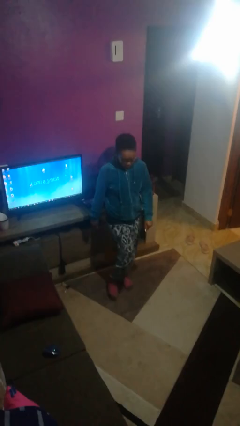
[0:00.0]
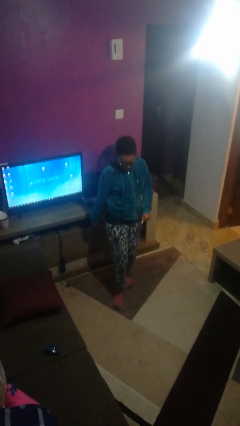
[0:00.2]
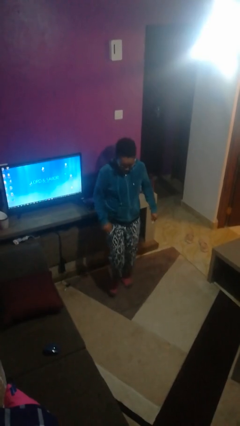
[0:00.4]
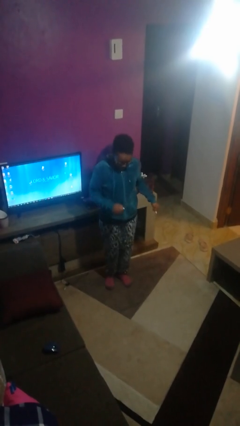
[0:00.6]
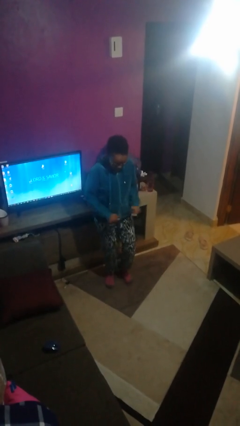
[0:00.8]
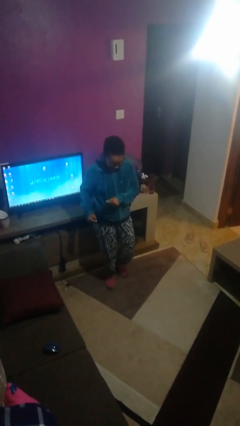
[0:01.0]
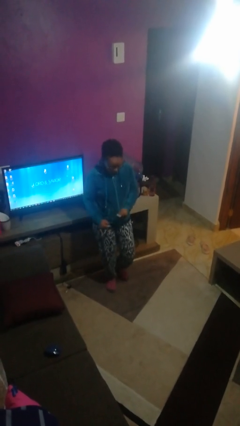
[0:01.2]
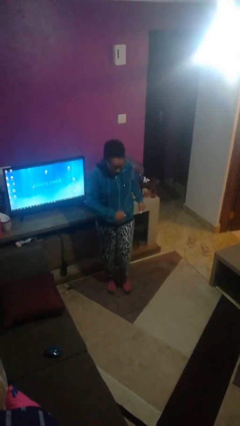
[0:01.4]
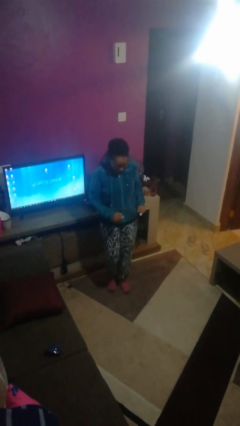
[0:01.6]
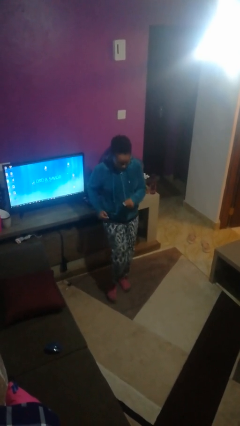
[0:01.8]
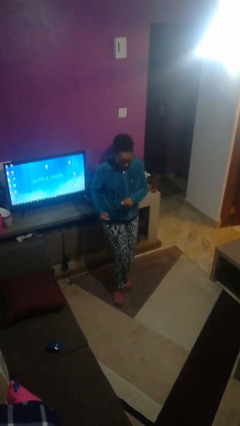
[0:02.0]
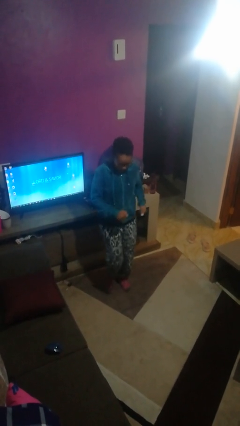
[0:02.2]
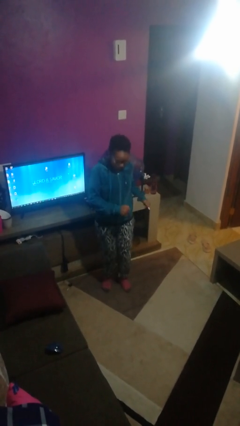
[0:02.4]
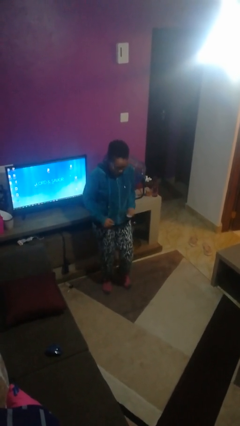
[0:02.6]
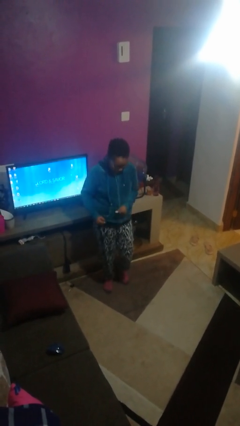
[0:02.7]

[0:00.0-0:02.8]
person dances in place

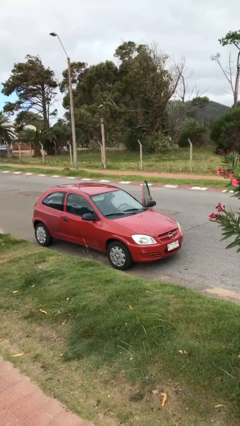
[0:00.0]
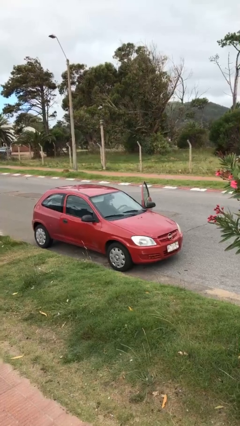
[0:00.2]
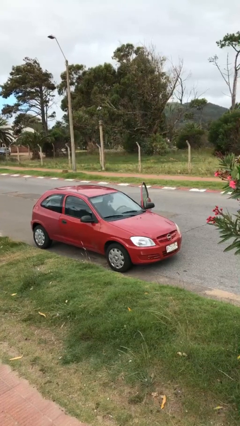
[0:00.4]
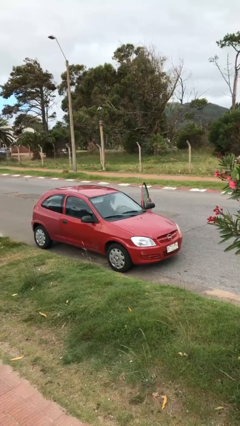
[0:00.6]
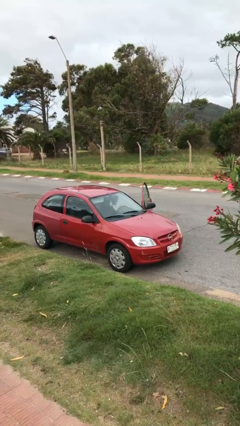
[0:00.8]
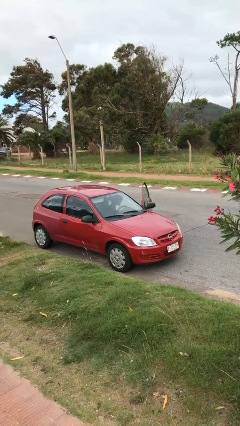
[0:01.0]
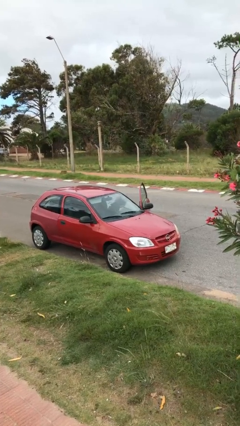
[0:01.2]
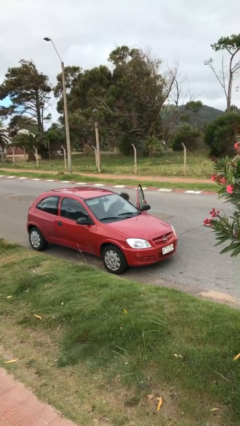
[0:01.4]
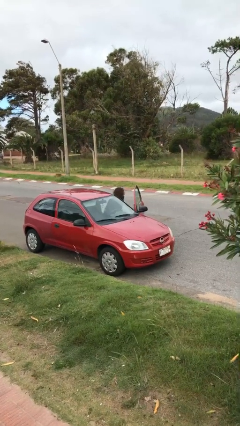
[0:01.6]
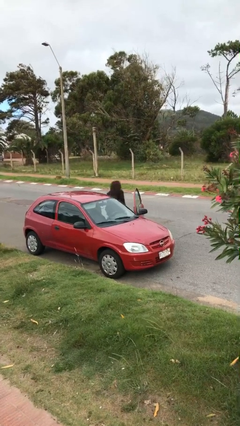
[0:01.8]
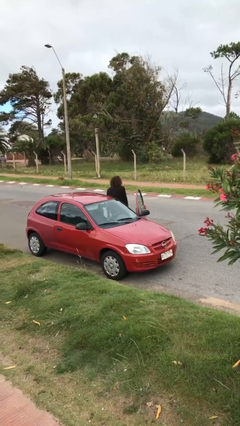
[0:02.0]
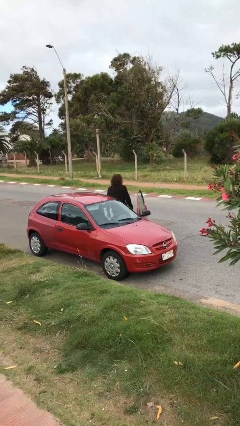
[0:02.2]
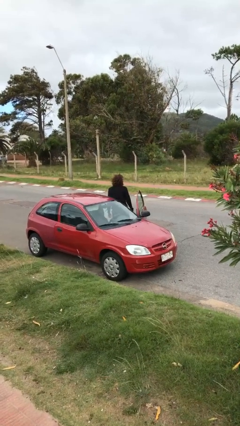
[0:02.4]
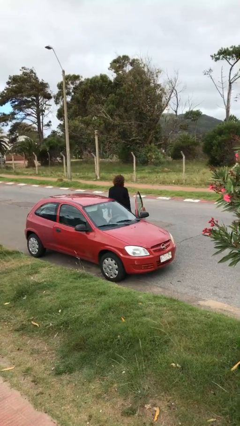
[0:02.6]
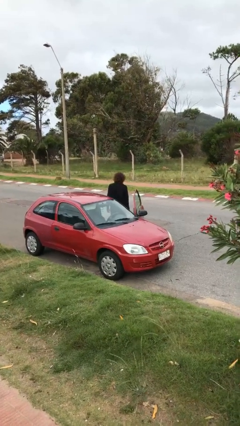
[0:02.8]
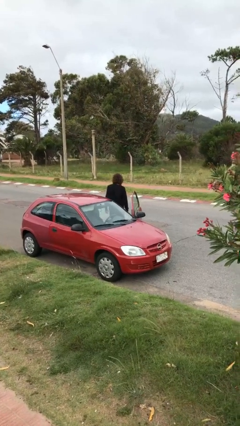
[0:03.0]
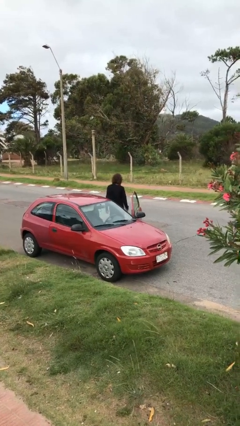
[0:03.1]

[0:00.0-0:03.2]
person exits car

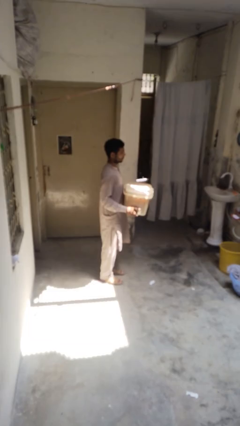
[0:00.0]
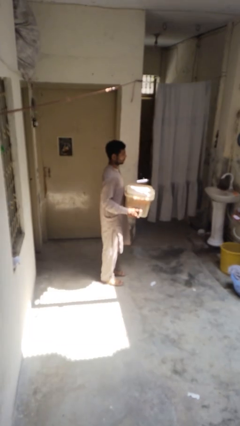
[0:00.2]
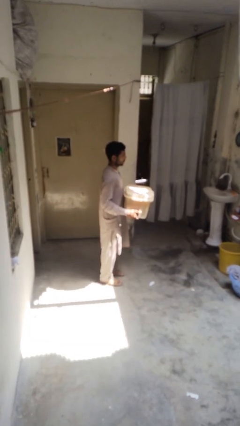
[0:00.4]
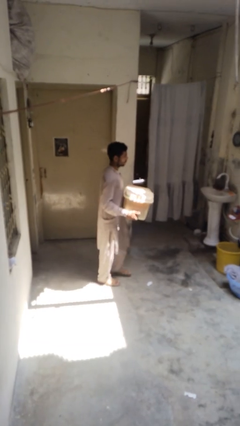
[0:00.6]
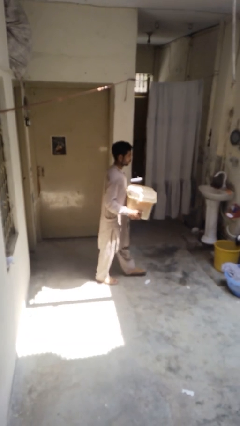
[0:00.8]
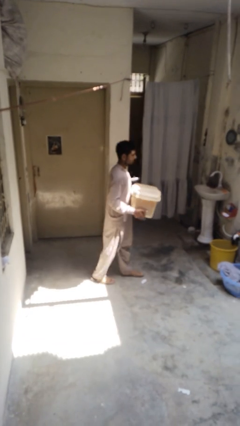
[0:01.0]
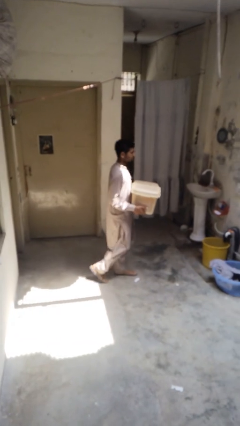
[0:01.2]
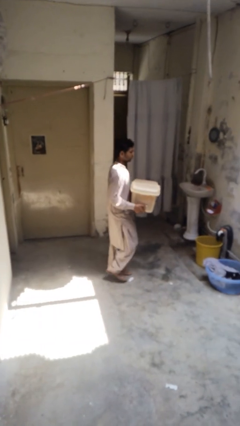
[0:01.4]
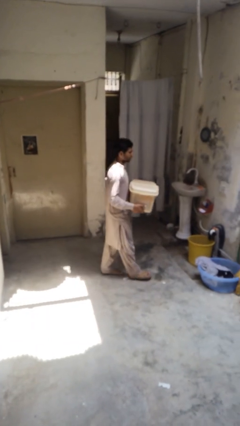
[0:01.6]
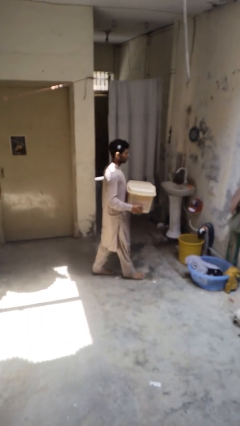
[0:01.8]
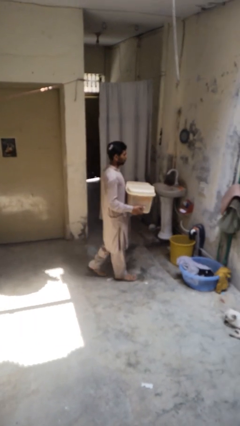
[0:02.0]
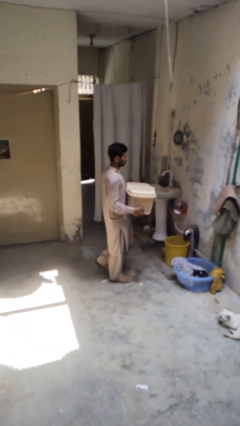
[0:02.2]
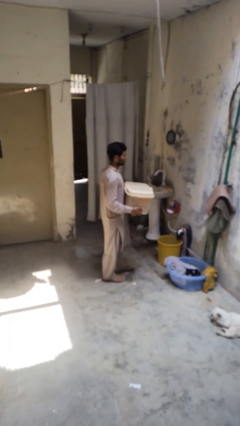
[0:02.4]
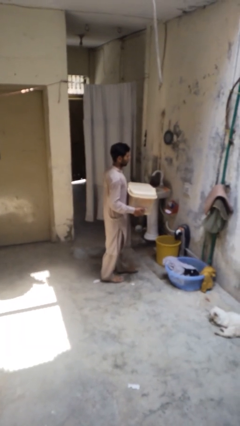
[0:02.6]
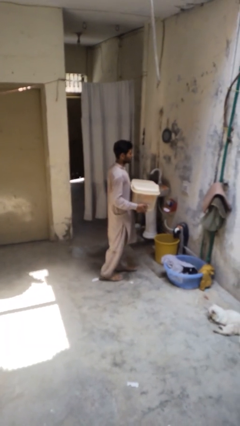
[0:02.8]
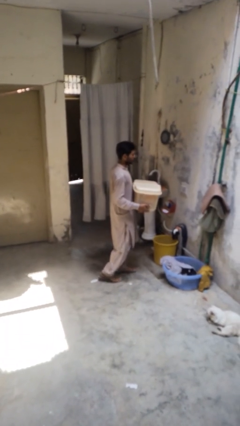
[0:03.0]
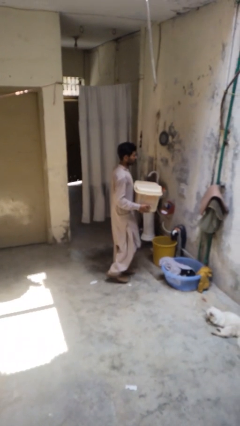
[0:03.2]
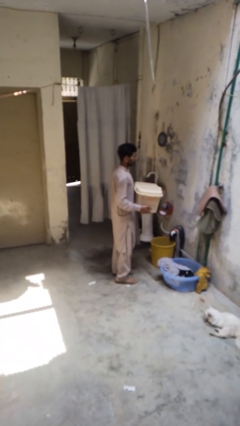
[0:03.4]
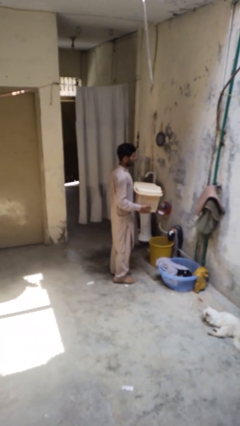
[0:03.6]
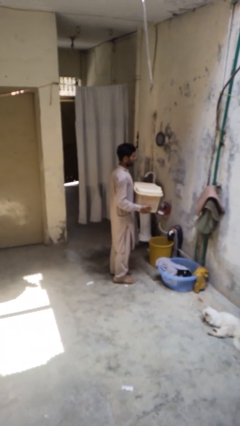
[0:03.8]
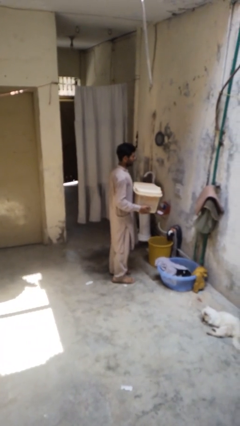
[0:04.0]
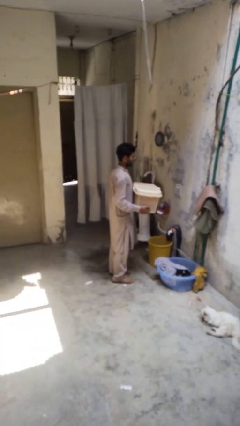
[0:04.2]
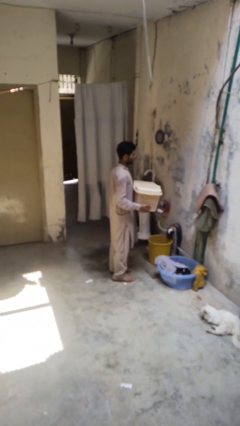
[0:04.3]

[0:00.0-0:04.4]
person carries laundry basket

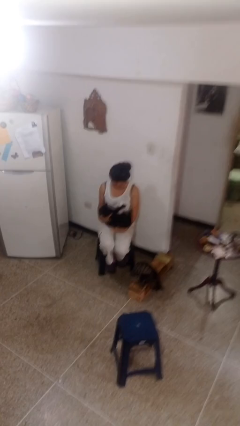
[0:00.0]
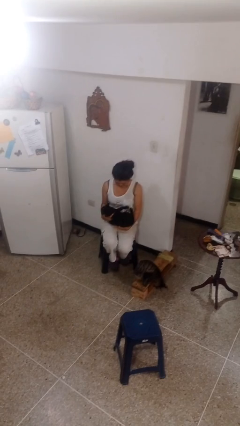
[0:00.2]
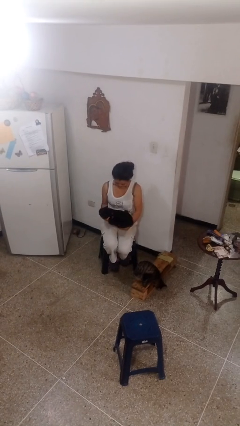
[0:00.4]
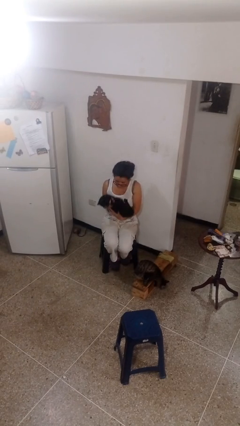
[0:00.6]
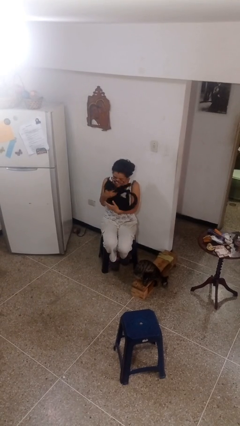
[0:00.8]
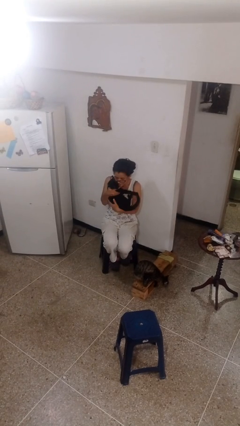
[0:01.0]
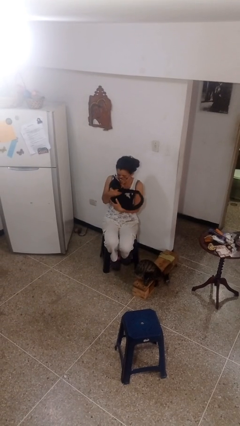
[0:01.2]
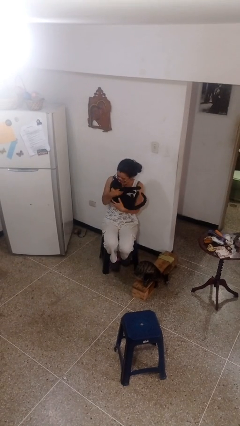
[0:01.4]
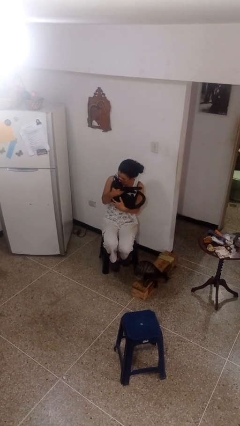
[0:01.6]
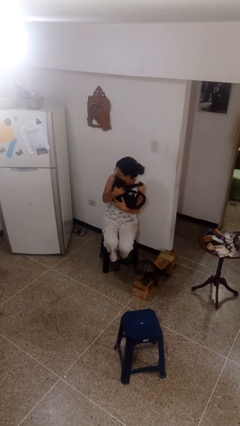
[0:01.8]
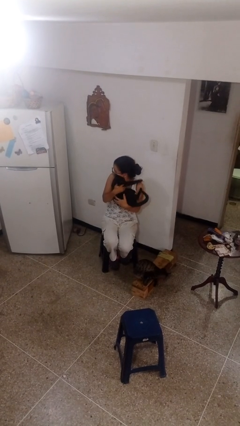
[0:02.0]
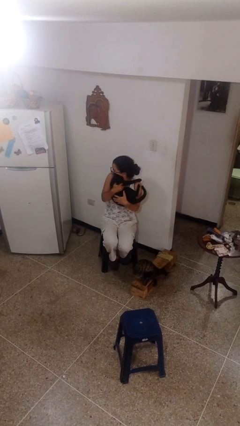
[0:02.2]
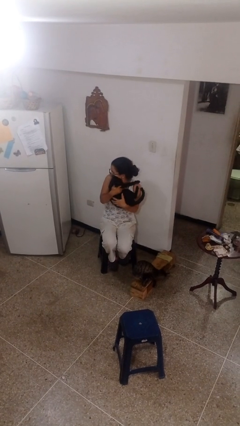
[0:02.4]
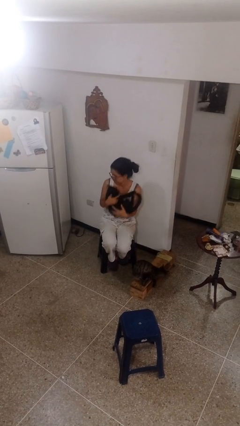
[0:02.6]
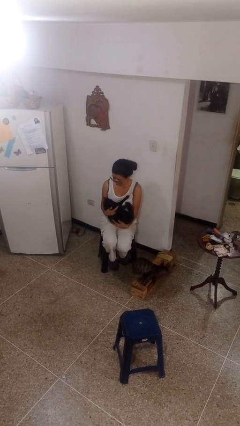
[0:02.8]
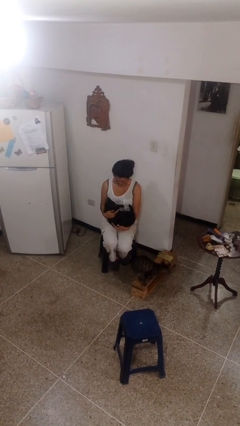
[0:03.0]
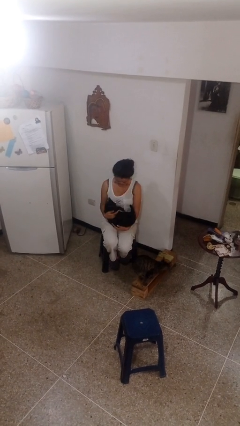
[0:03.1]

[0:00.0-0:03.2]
person hugs cat

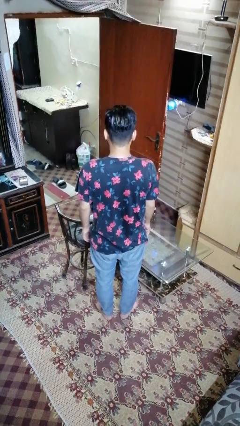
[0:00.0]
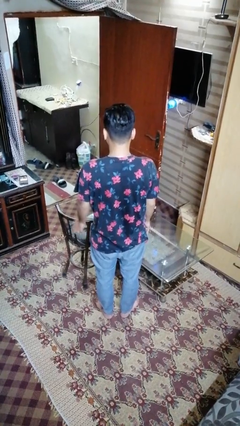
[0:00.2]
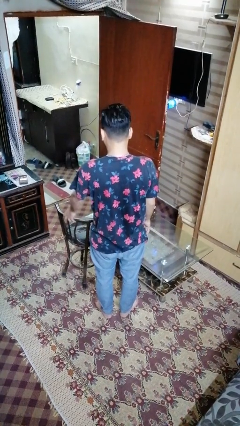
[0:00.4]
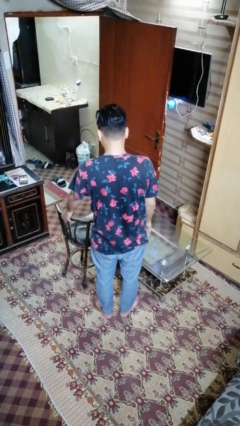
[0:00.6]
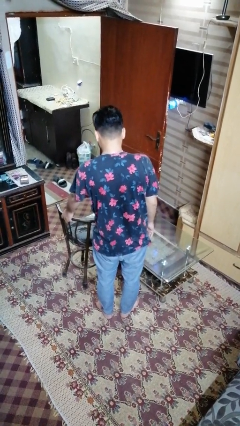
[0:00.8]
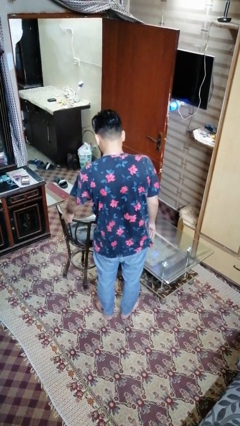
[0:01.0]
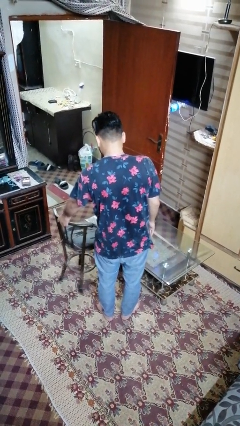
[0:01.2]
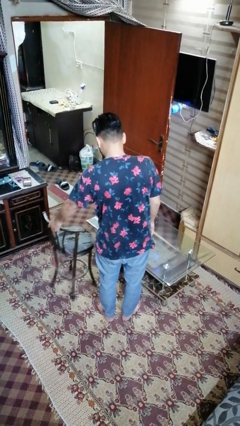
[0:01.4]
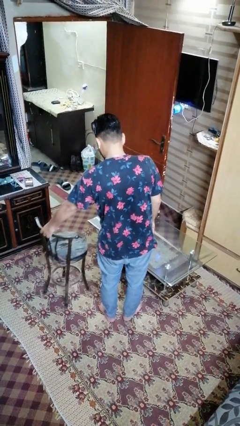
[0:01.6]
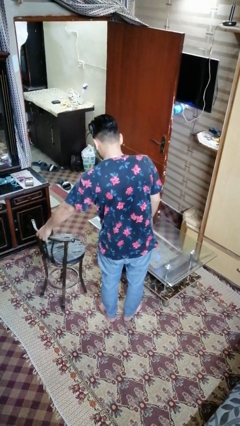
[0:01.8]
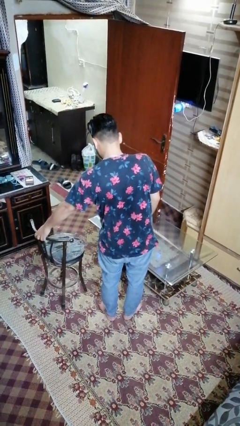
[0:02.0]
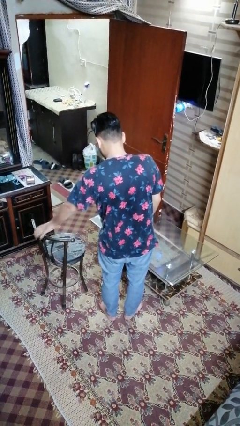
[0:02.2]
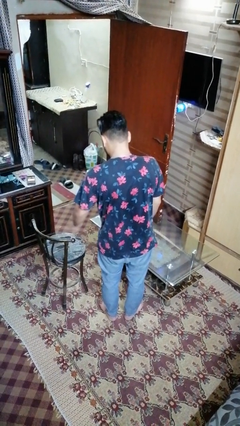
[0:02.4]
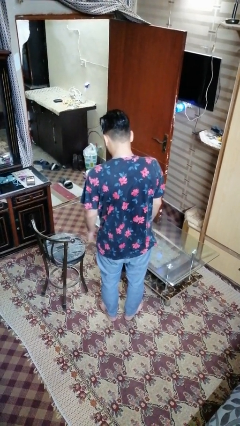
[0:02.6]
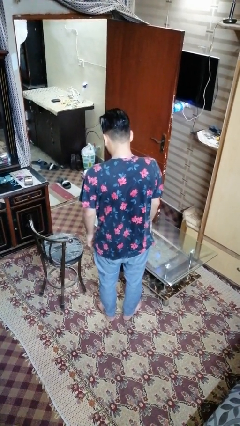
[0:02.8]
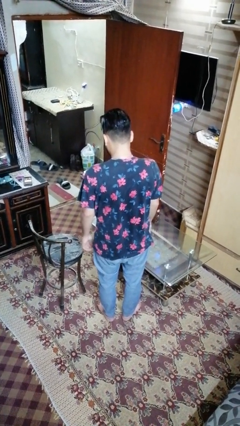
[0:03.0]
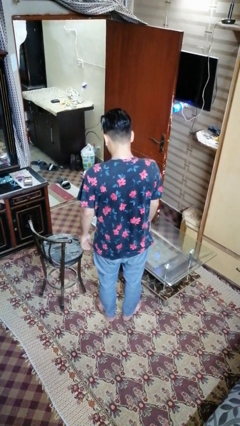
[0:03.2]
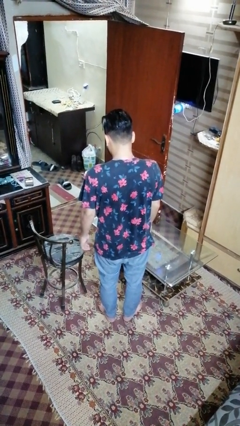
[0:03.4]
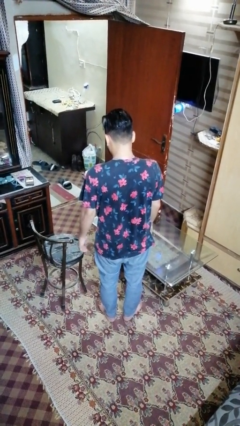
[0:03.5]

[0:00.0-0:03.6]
person pulls out chair

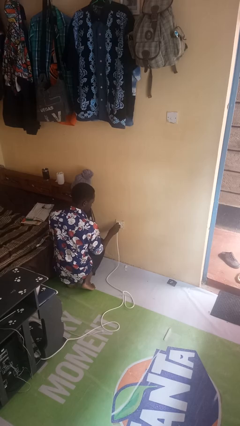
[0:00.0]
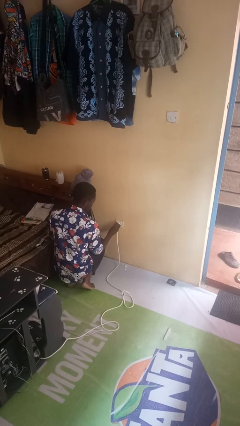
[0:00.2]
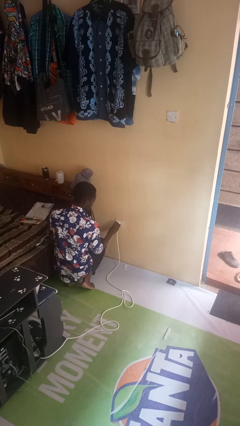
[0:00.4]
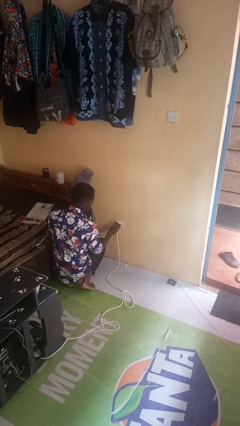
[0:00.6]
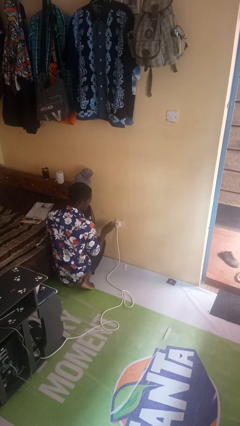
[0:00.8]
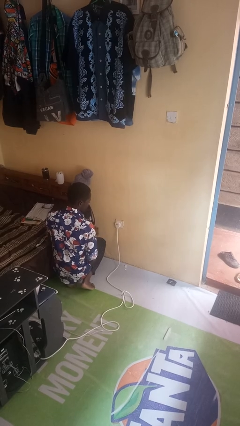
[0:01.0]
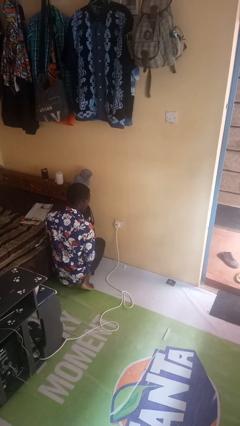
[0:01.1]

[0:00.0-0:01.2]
person plugs into electrical socket
